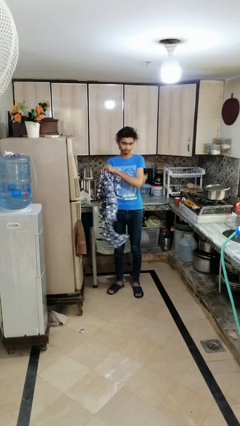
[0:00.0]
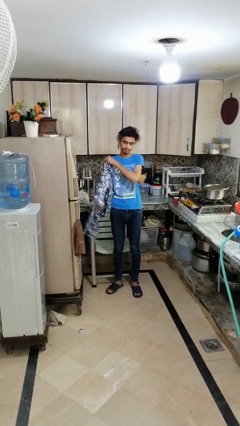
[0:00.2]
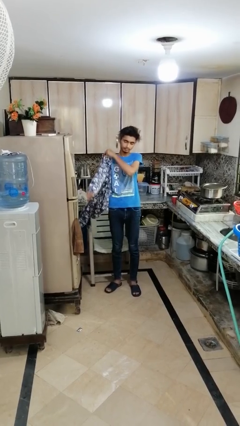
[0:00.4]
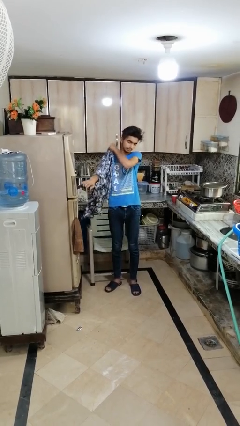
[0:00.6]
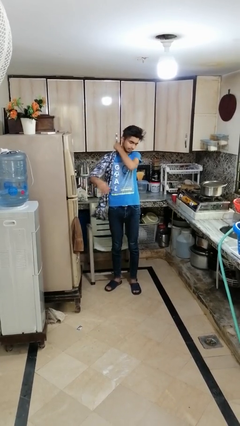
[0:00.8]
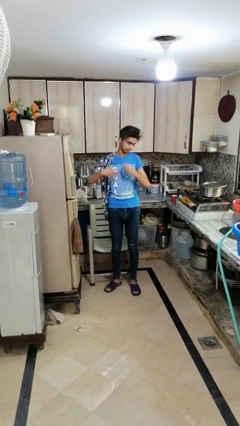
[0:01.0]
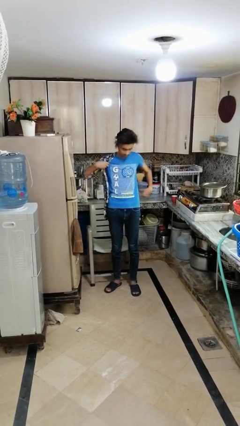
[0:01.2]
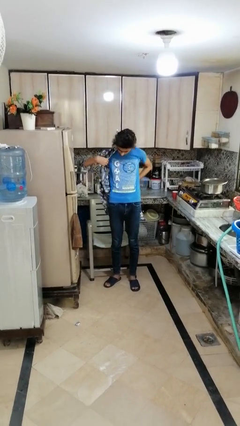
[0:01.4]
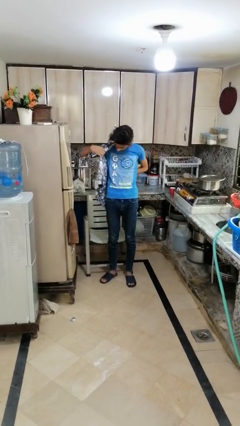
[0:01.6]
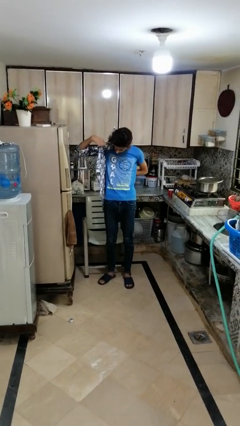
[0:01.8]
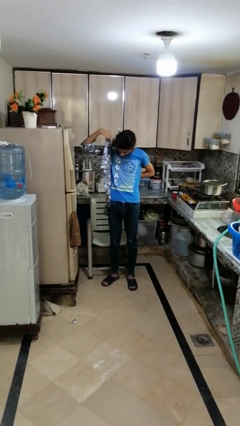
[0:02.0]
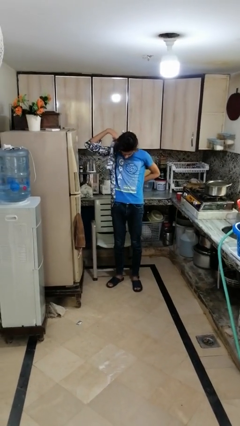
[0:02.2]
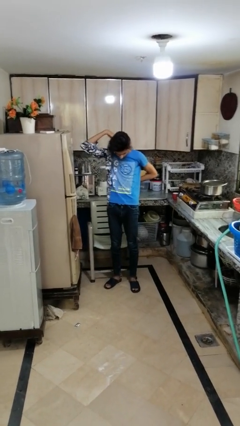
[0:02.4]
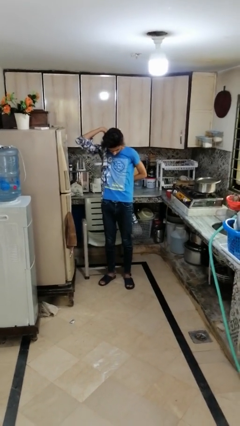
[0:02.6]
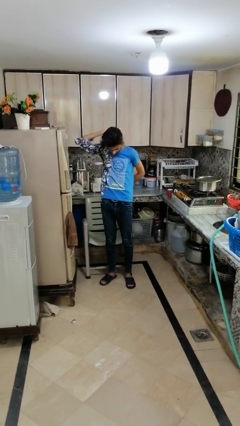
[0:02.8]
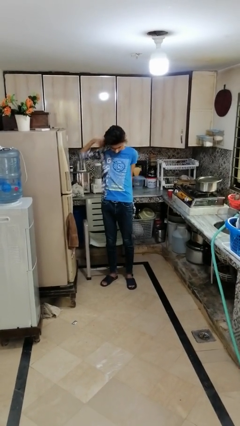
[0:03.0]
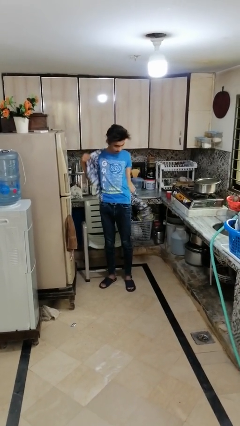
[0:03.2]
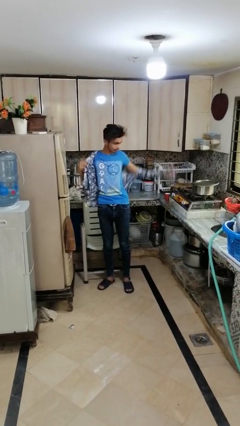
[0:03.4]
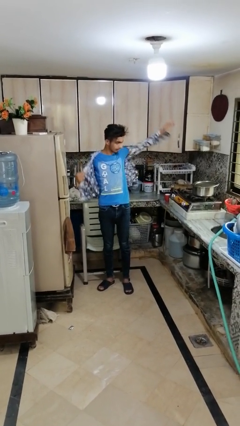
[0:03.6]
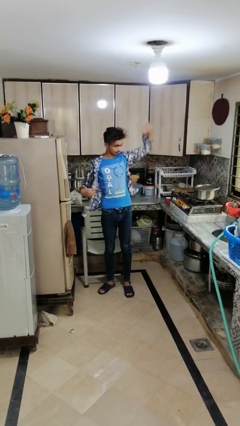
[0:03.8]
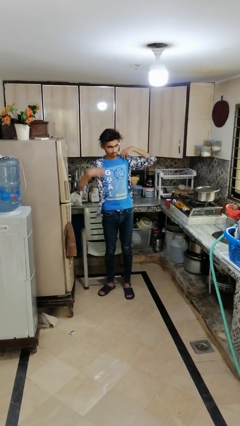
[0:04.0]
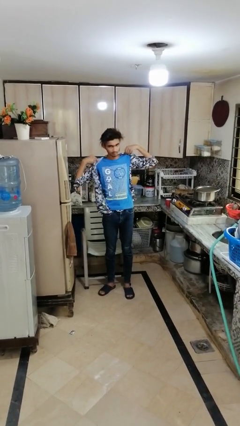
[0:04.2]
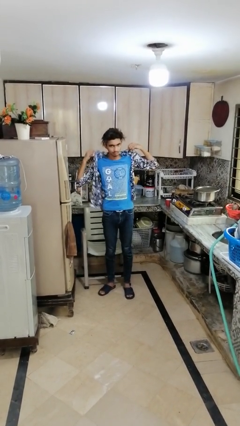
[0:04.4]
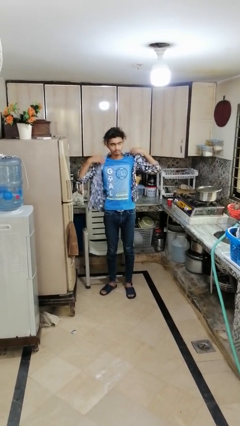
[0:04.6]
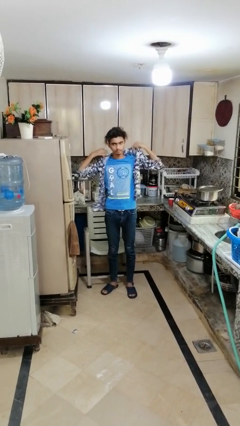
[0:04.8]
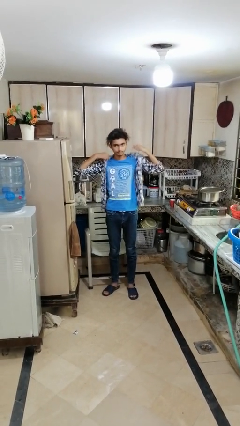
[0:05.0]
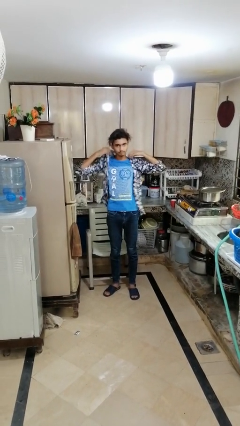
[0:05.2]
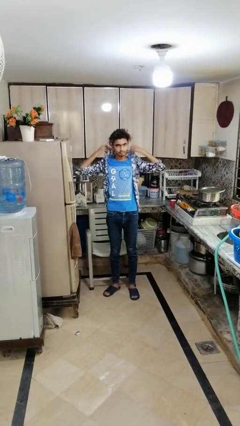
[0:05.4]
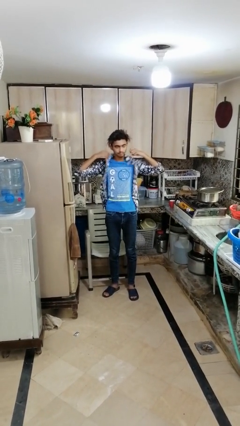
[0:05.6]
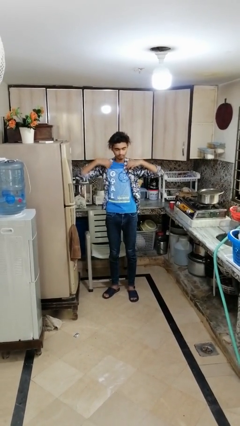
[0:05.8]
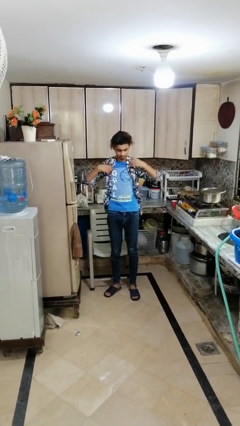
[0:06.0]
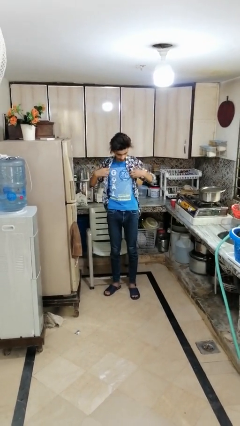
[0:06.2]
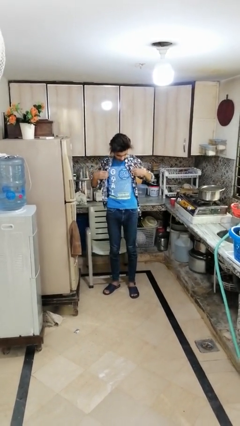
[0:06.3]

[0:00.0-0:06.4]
person puts on shirt

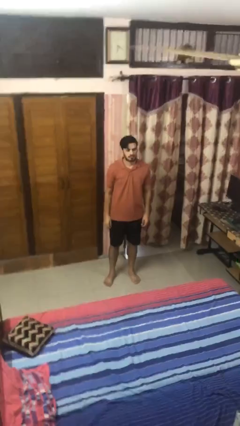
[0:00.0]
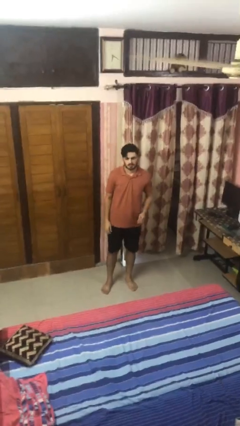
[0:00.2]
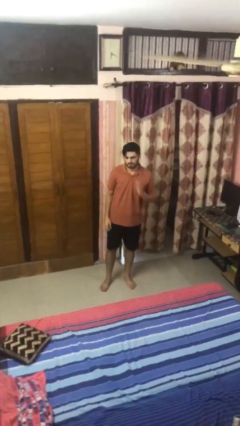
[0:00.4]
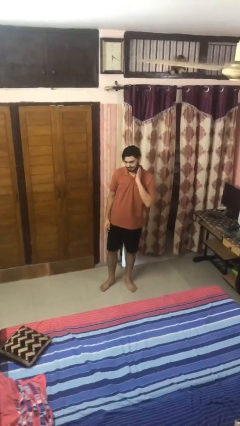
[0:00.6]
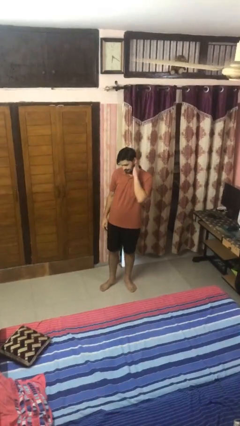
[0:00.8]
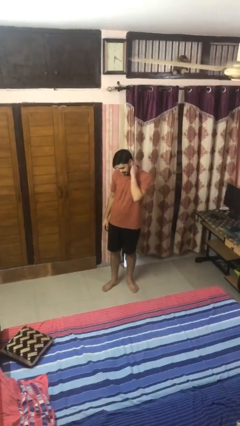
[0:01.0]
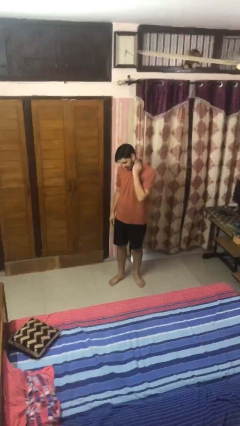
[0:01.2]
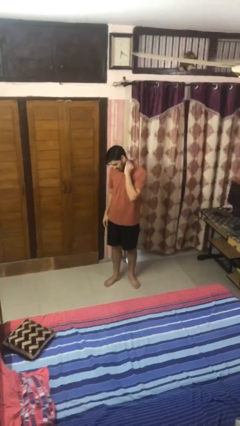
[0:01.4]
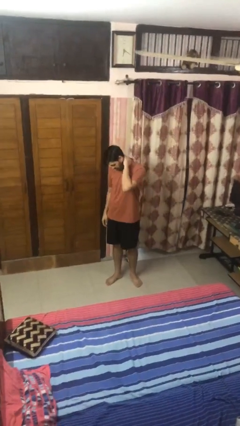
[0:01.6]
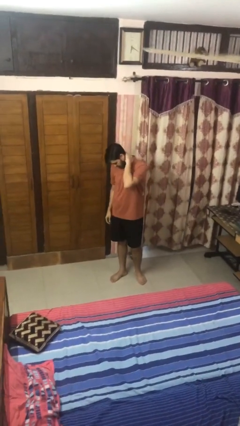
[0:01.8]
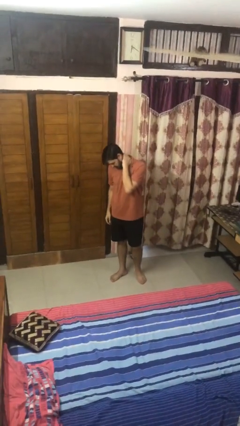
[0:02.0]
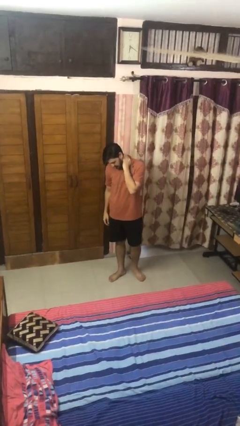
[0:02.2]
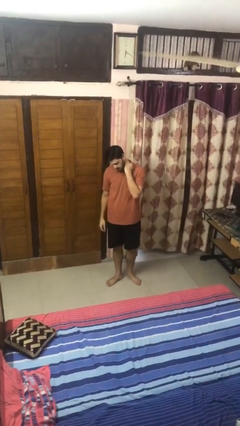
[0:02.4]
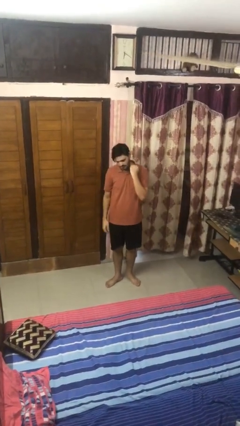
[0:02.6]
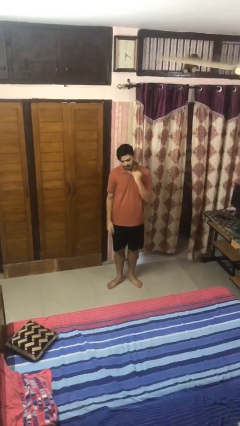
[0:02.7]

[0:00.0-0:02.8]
person rubs neck

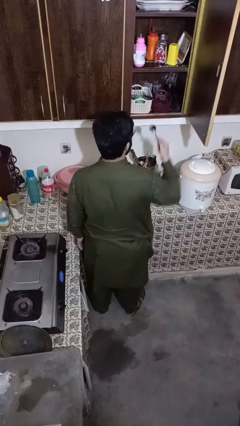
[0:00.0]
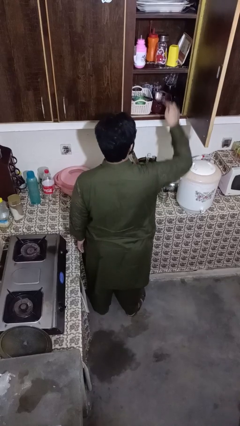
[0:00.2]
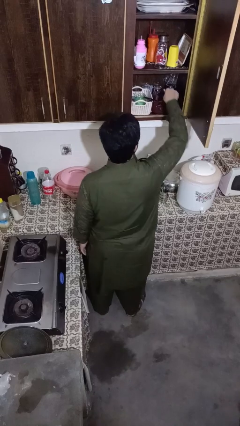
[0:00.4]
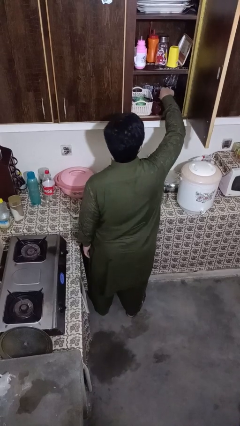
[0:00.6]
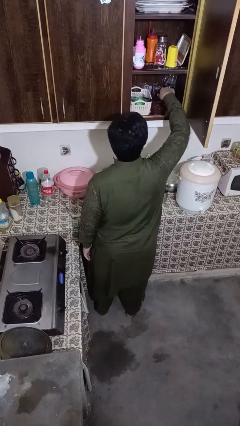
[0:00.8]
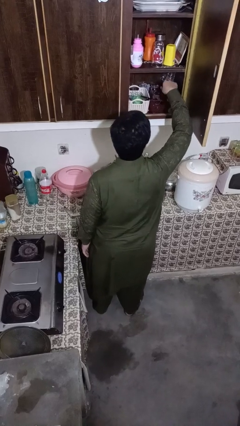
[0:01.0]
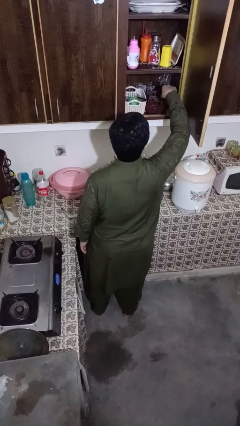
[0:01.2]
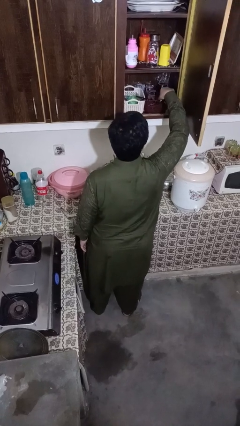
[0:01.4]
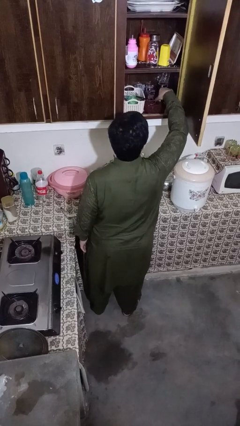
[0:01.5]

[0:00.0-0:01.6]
person puts object into kitchen drawer

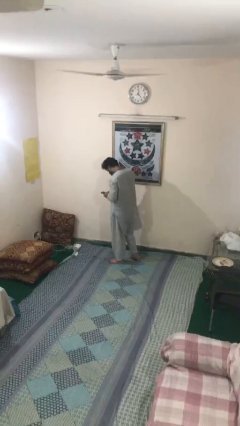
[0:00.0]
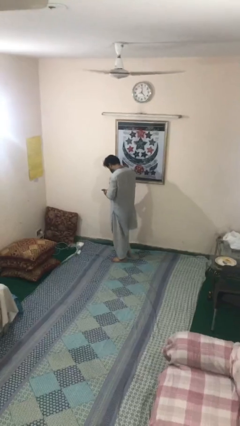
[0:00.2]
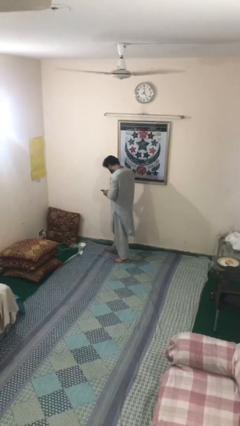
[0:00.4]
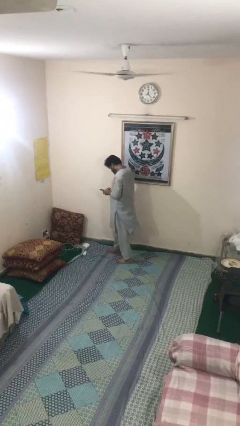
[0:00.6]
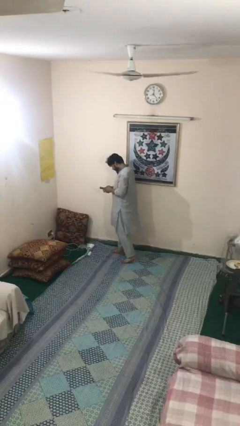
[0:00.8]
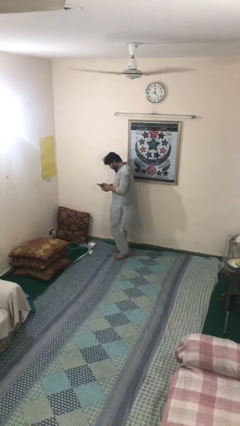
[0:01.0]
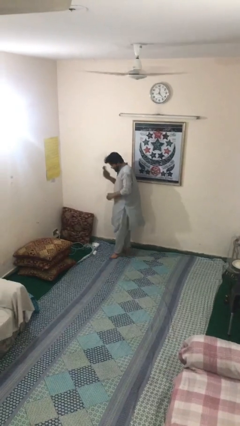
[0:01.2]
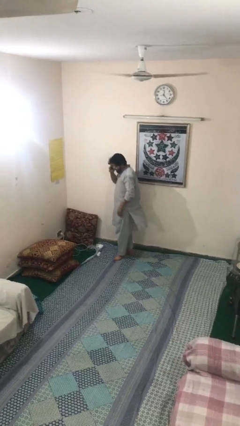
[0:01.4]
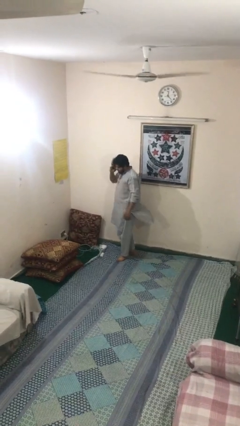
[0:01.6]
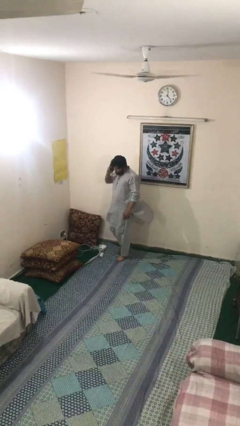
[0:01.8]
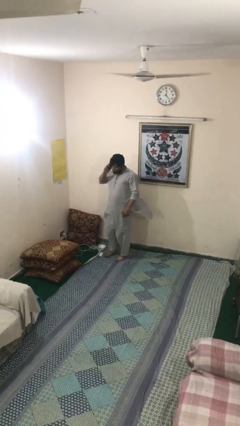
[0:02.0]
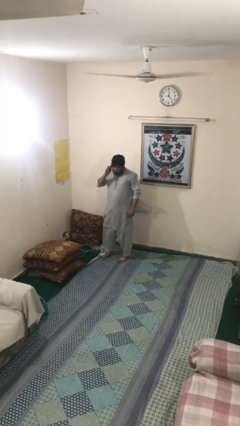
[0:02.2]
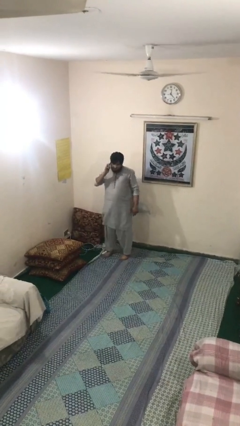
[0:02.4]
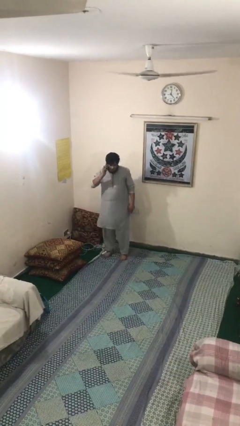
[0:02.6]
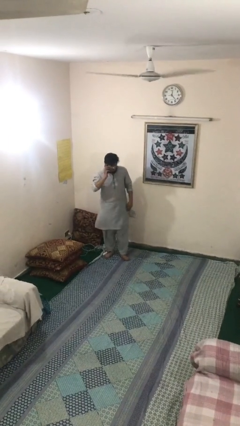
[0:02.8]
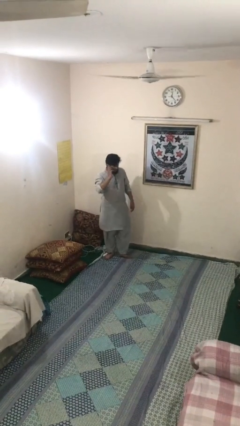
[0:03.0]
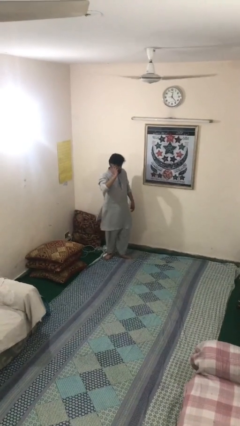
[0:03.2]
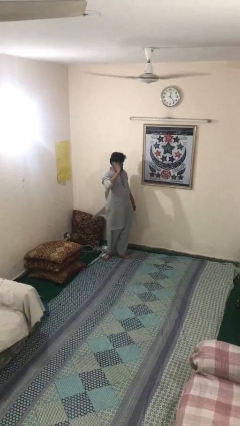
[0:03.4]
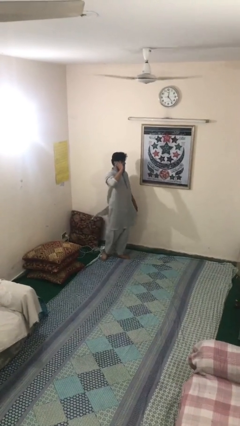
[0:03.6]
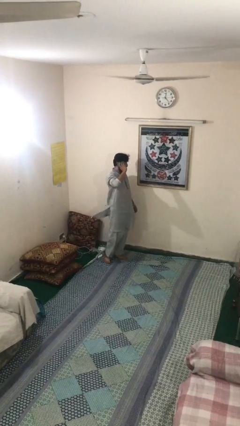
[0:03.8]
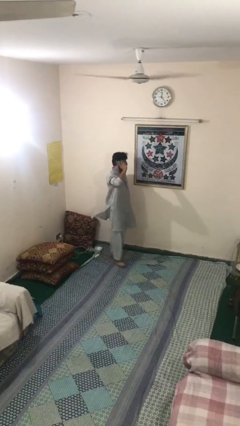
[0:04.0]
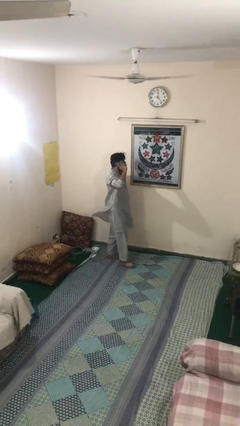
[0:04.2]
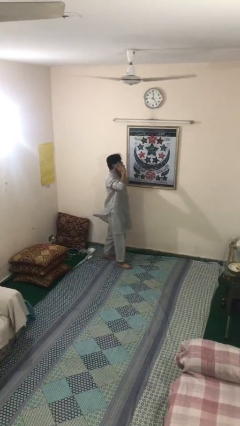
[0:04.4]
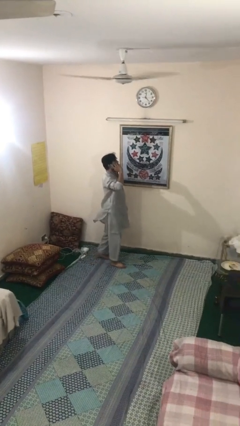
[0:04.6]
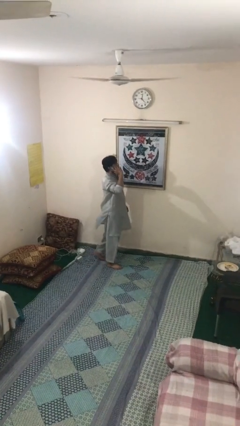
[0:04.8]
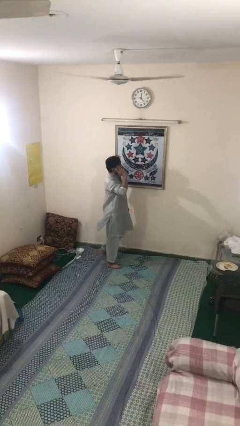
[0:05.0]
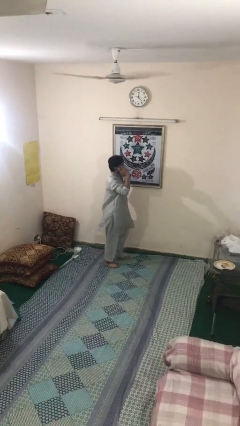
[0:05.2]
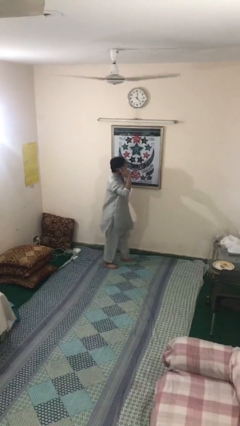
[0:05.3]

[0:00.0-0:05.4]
person talks on phone

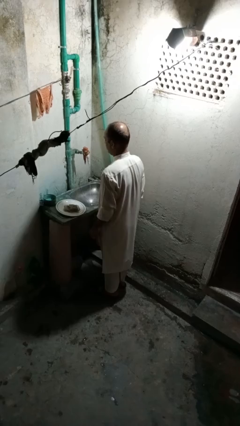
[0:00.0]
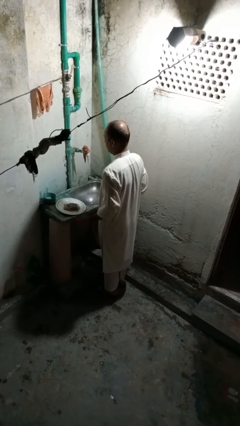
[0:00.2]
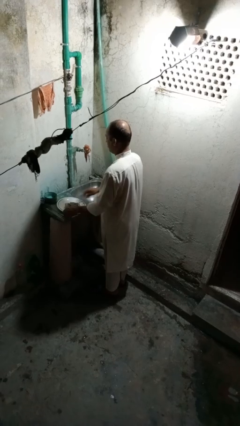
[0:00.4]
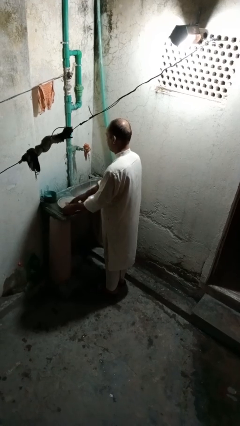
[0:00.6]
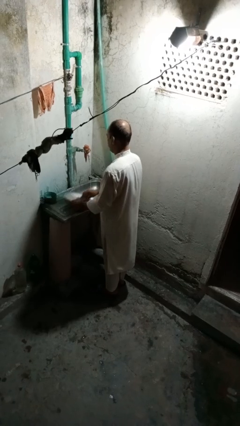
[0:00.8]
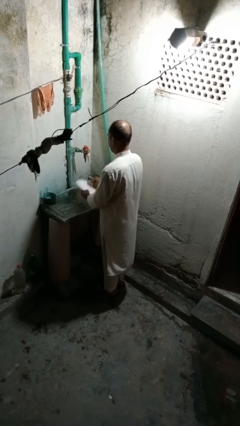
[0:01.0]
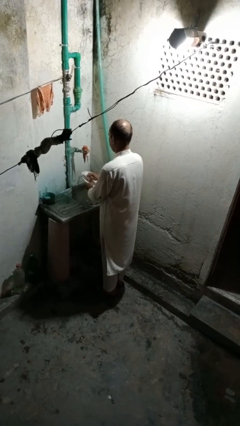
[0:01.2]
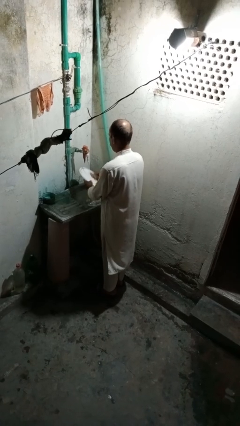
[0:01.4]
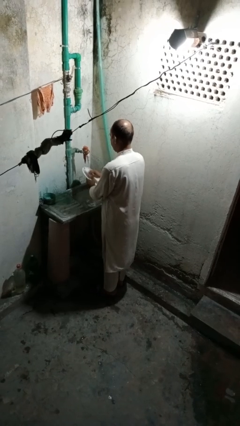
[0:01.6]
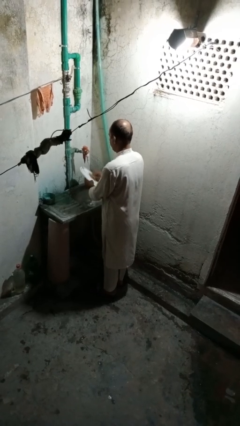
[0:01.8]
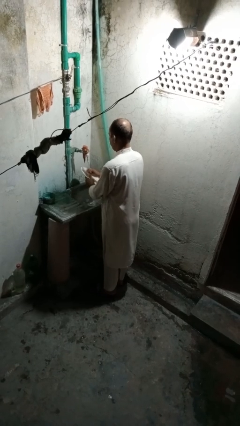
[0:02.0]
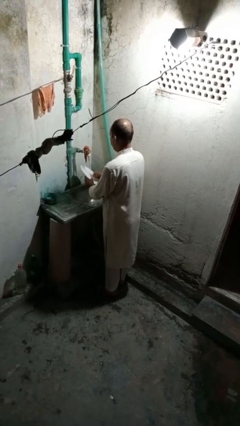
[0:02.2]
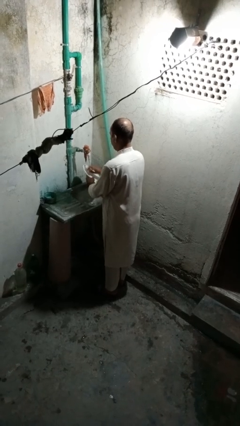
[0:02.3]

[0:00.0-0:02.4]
person washes dish
